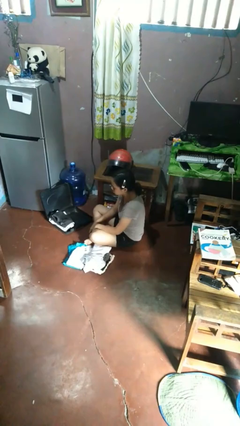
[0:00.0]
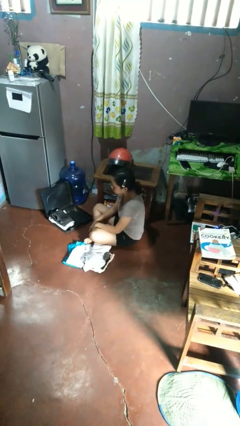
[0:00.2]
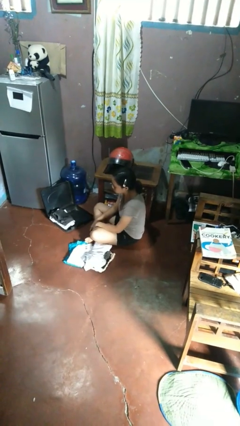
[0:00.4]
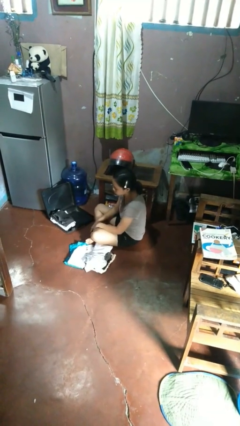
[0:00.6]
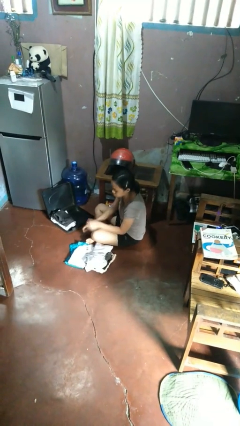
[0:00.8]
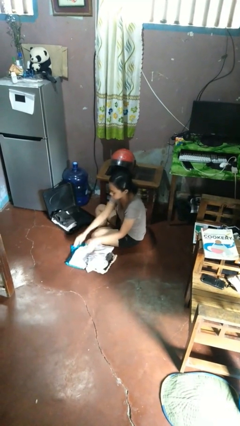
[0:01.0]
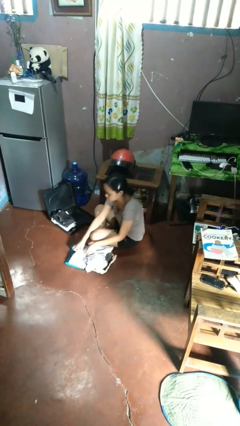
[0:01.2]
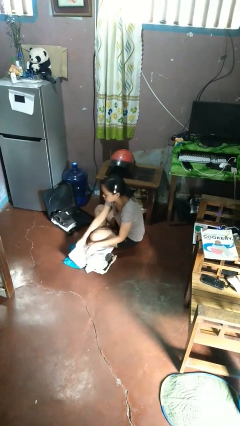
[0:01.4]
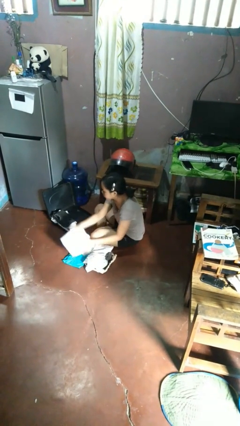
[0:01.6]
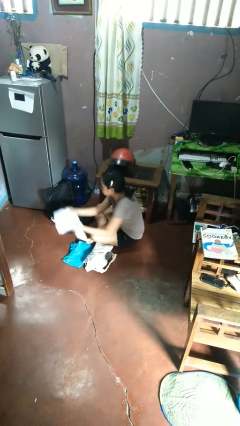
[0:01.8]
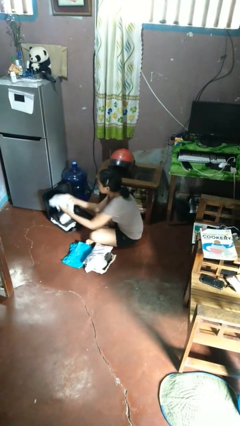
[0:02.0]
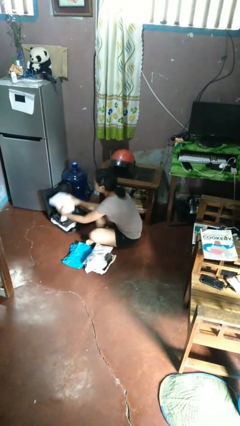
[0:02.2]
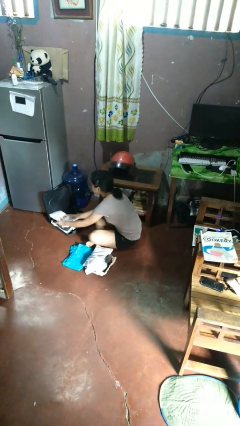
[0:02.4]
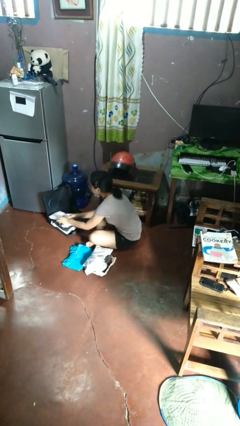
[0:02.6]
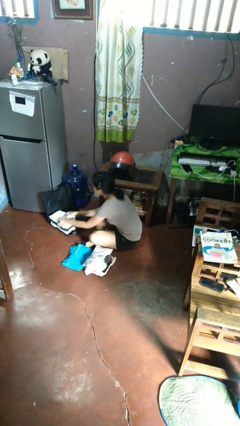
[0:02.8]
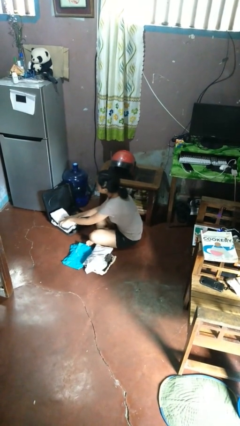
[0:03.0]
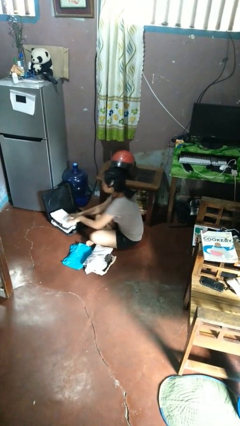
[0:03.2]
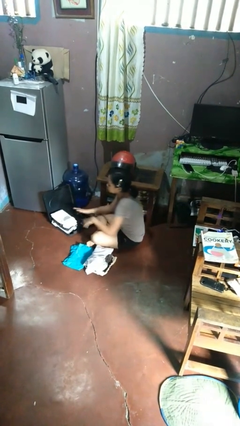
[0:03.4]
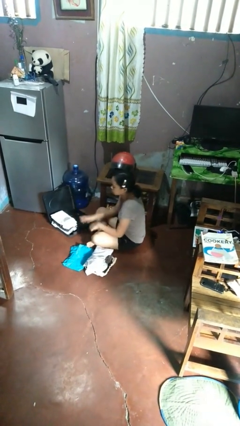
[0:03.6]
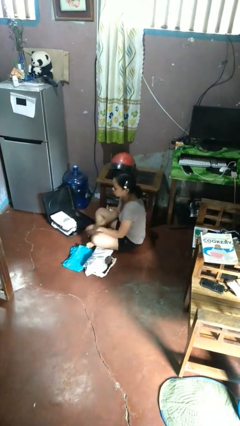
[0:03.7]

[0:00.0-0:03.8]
person loads clothes into suitcase

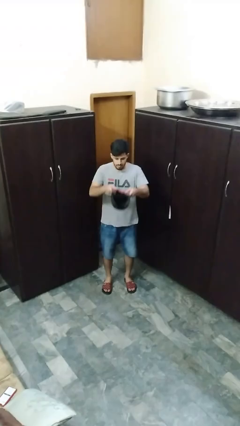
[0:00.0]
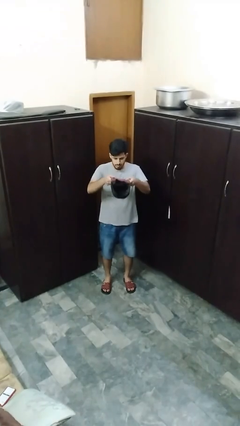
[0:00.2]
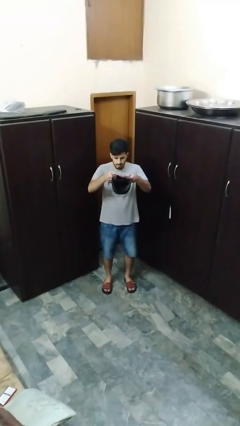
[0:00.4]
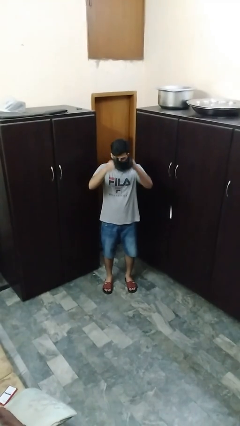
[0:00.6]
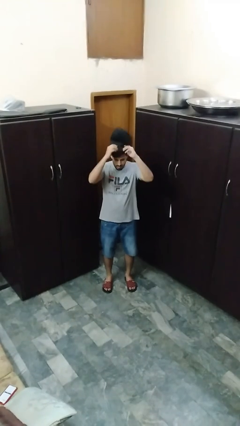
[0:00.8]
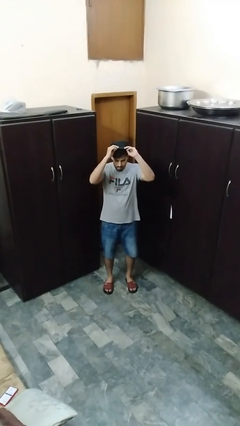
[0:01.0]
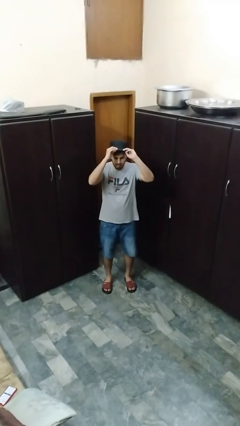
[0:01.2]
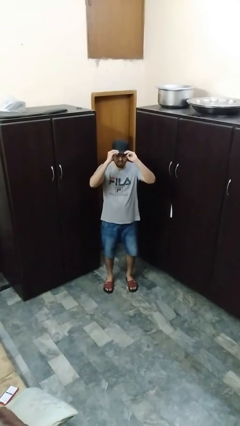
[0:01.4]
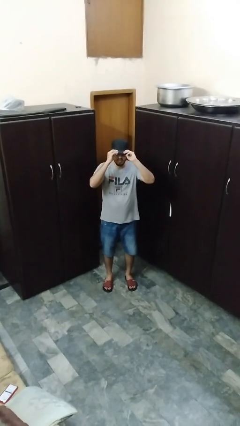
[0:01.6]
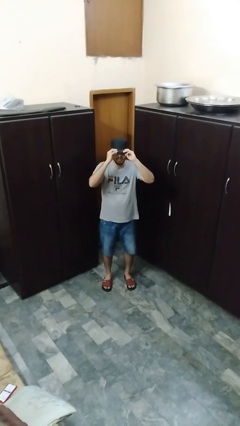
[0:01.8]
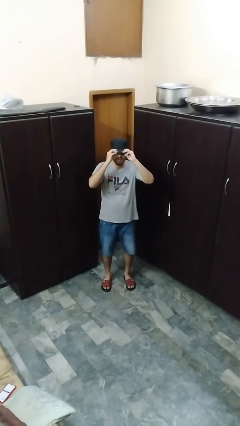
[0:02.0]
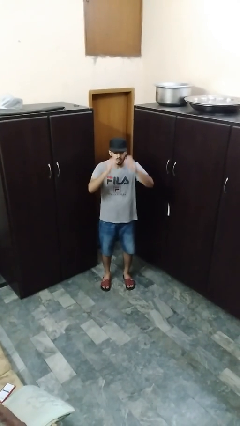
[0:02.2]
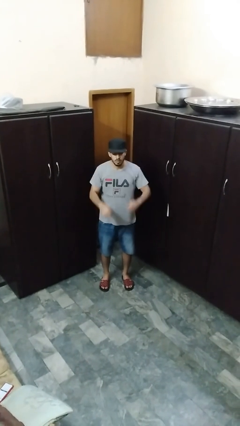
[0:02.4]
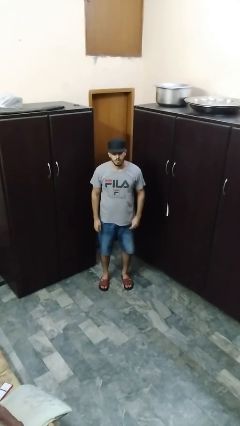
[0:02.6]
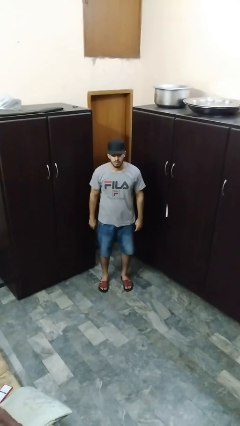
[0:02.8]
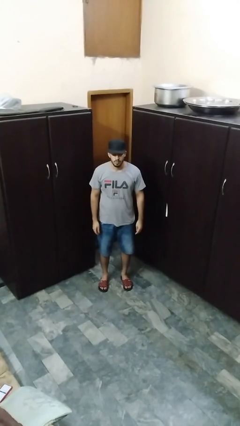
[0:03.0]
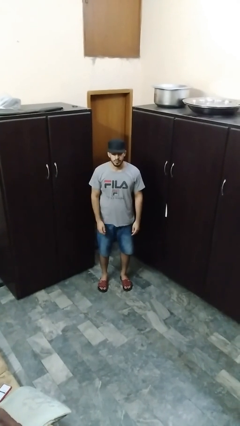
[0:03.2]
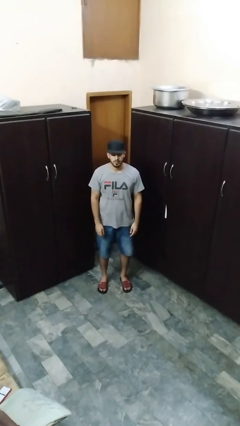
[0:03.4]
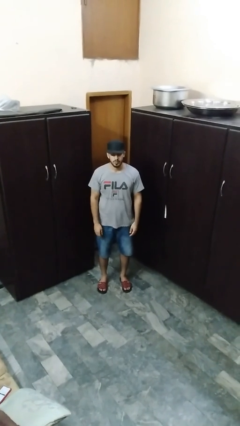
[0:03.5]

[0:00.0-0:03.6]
person puts on hat

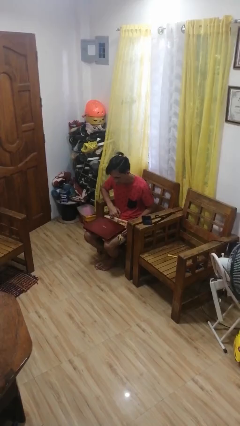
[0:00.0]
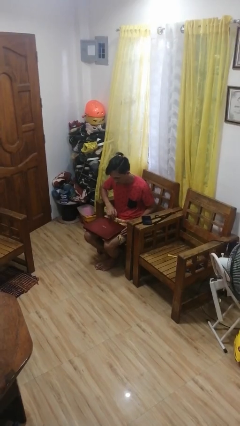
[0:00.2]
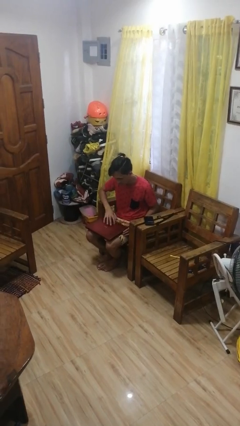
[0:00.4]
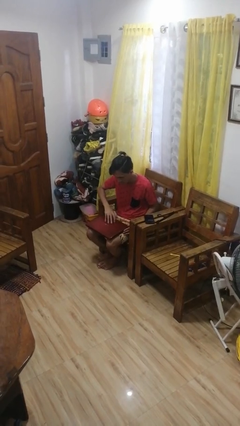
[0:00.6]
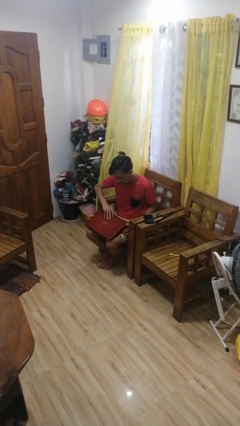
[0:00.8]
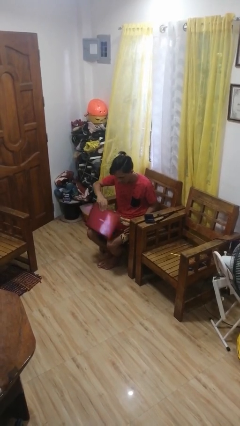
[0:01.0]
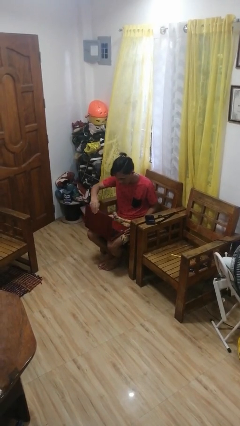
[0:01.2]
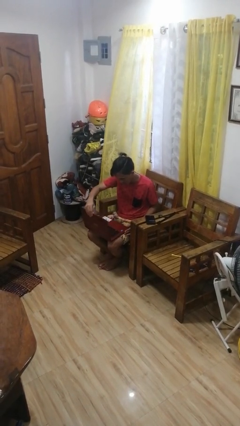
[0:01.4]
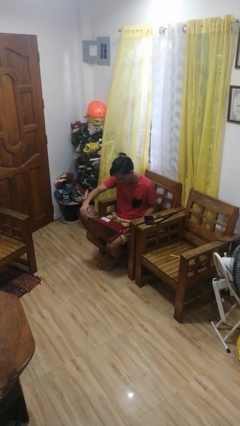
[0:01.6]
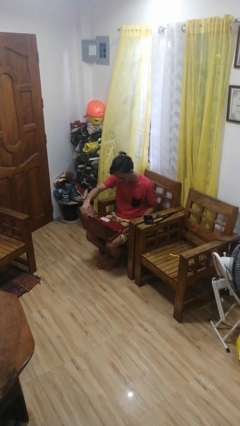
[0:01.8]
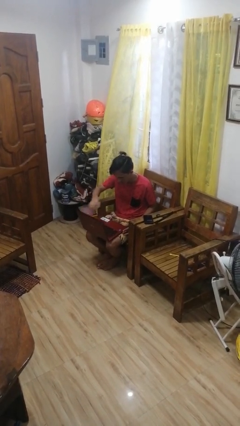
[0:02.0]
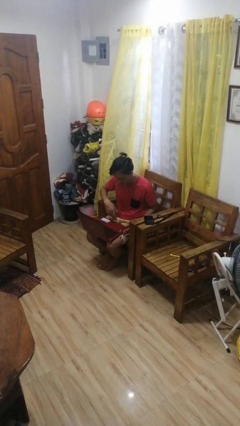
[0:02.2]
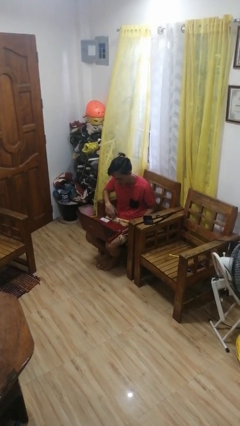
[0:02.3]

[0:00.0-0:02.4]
person opens laptop

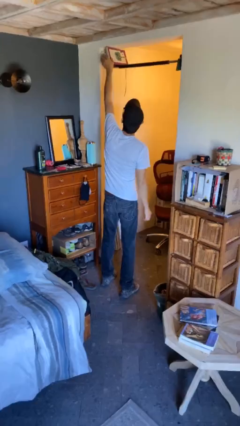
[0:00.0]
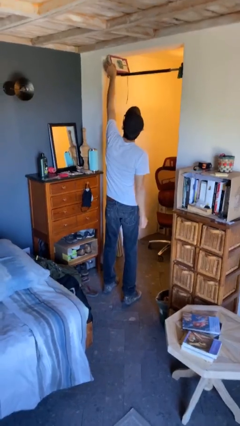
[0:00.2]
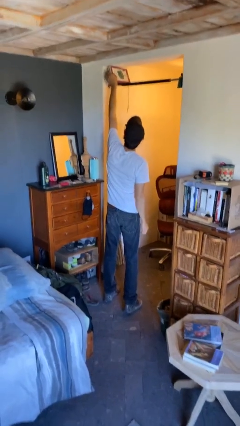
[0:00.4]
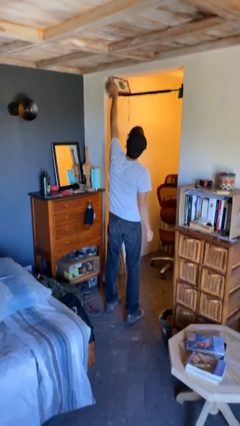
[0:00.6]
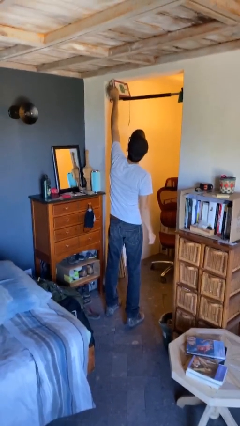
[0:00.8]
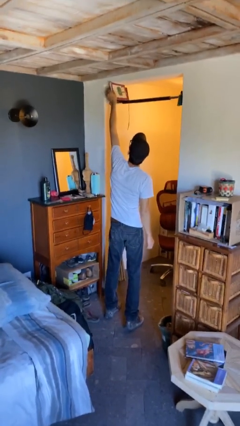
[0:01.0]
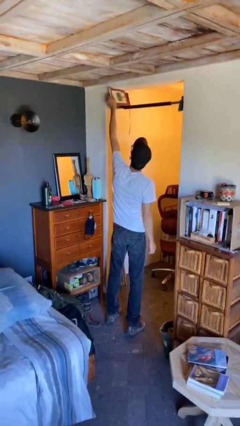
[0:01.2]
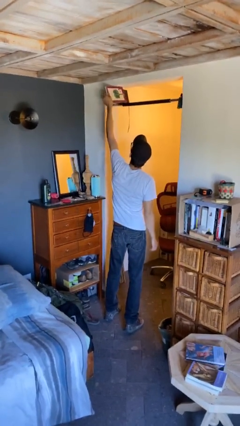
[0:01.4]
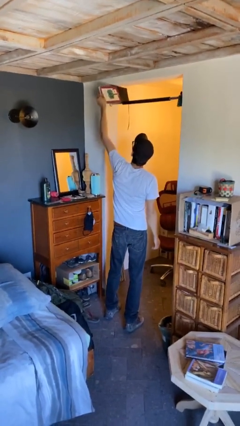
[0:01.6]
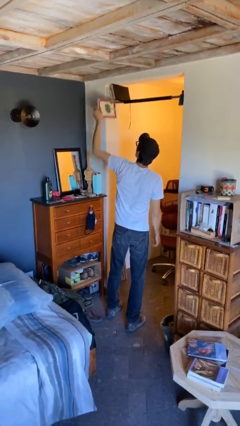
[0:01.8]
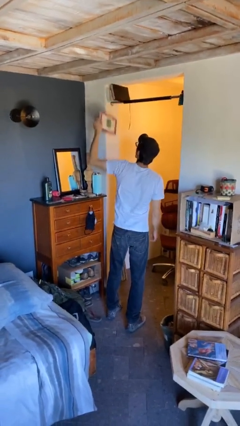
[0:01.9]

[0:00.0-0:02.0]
person picks up object from shelf

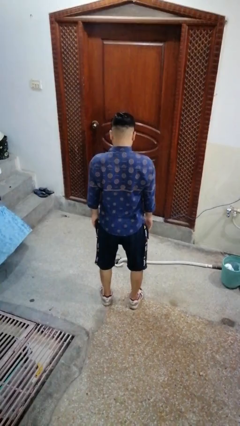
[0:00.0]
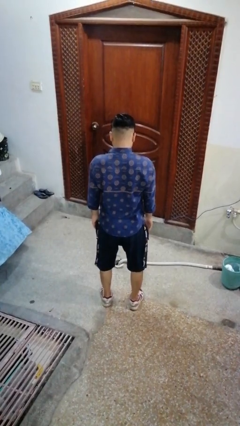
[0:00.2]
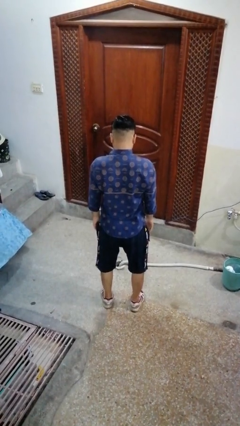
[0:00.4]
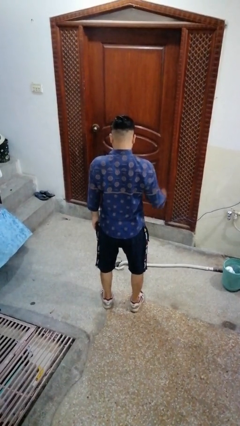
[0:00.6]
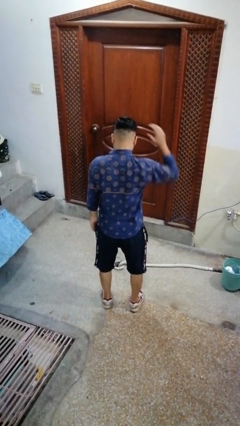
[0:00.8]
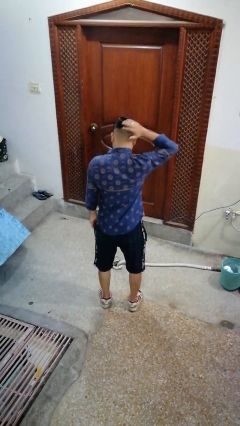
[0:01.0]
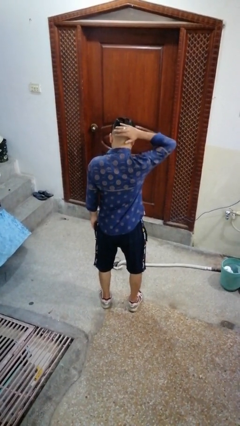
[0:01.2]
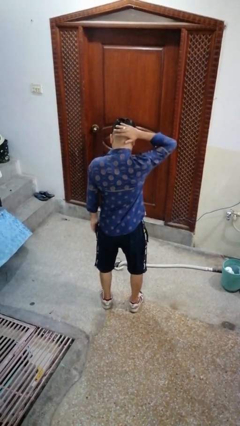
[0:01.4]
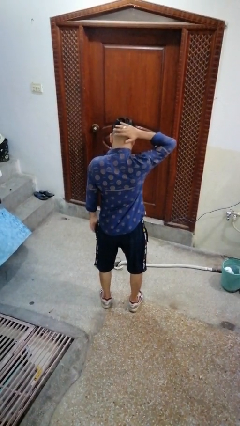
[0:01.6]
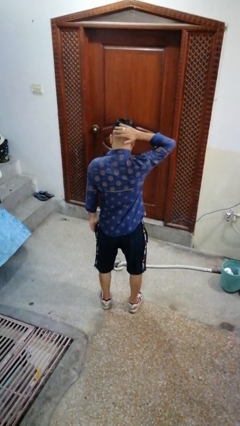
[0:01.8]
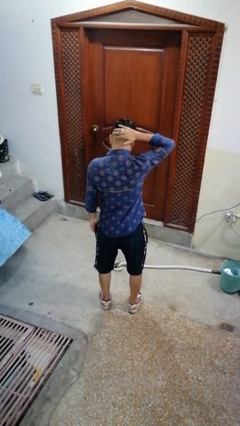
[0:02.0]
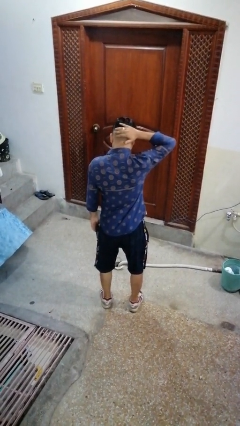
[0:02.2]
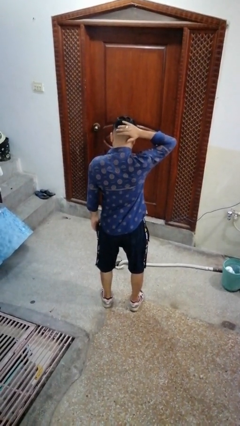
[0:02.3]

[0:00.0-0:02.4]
person pats head

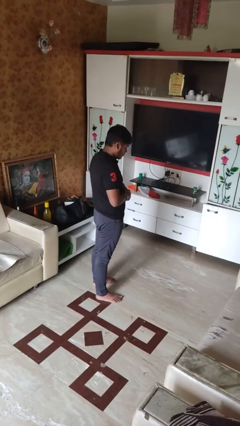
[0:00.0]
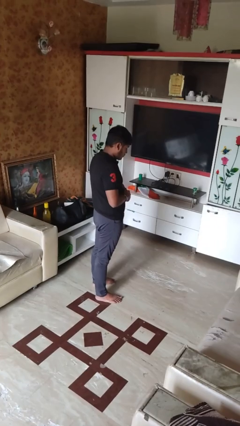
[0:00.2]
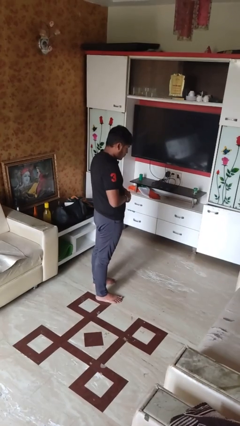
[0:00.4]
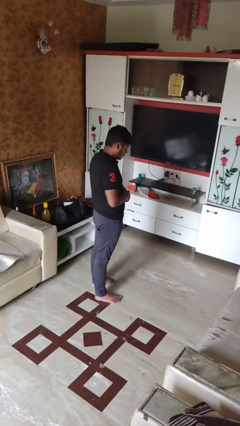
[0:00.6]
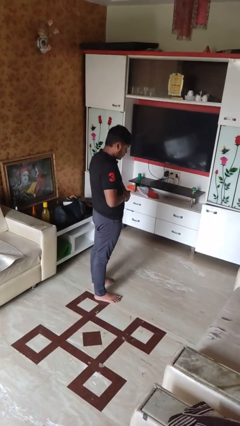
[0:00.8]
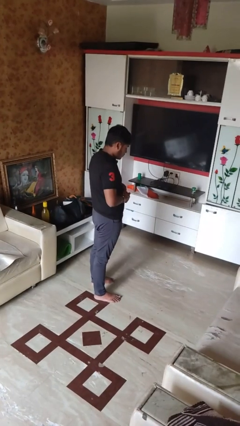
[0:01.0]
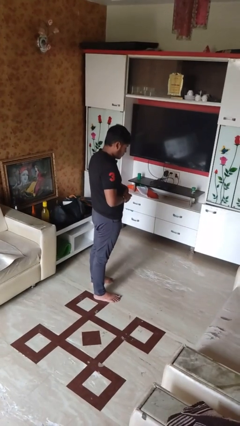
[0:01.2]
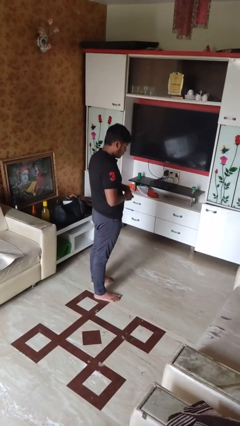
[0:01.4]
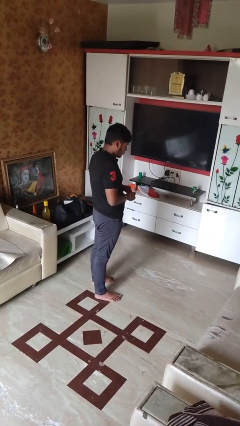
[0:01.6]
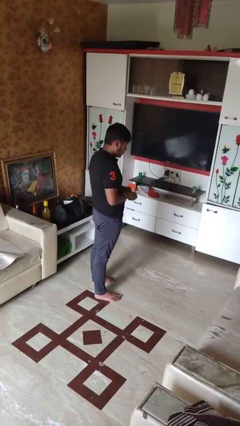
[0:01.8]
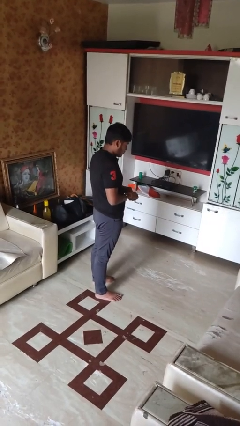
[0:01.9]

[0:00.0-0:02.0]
person takes off wristwatch

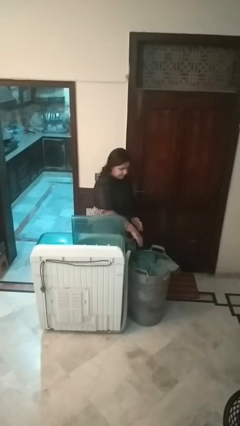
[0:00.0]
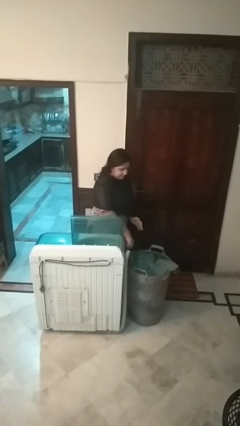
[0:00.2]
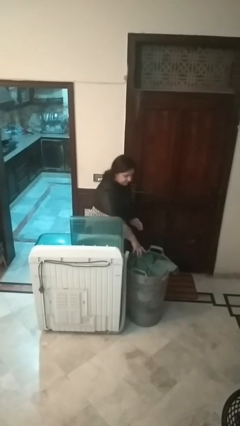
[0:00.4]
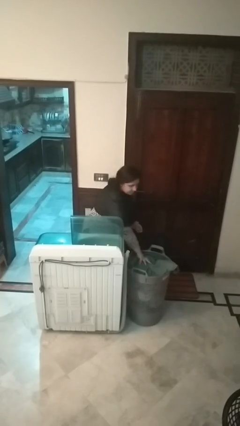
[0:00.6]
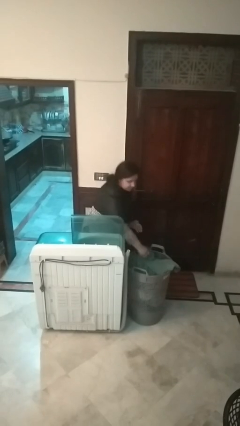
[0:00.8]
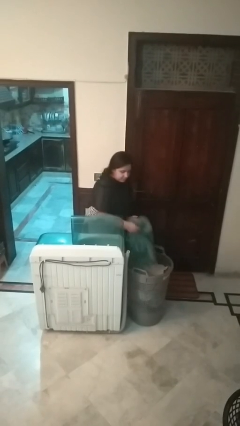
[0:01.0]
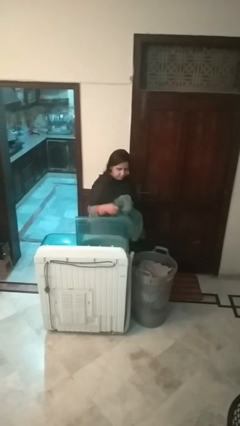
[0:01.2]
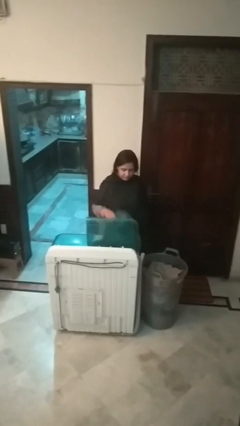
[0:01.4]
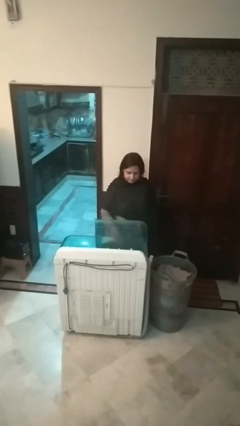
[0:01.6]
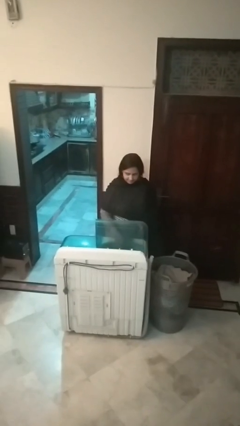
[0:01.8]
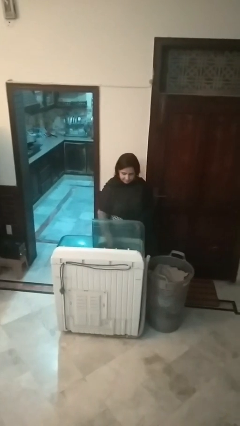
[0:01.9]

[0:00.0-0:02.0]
person loads clotheswasher
